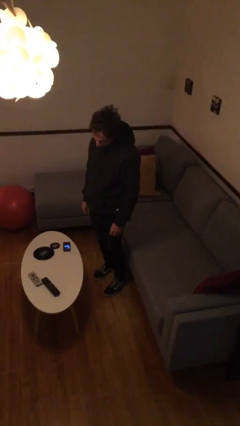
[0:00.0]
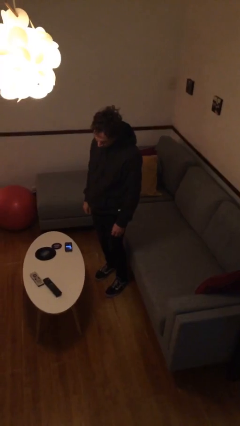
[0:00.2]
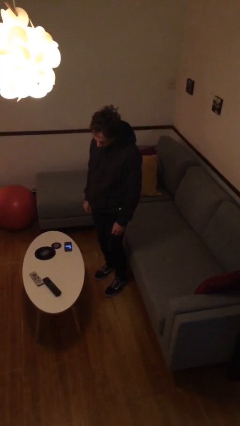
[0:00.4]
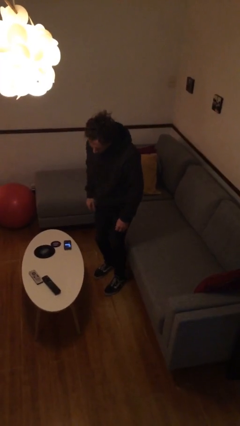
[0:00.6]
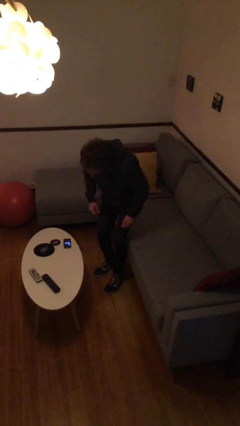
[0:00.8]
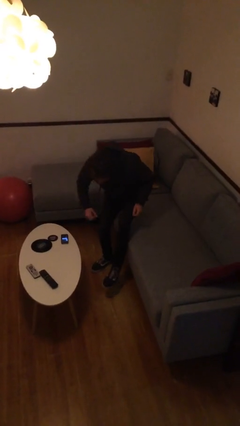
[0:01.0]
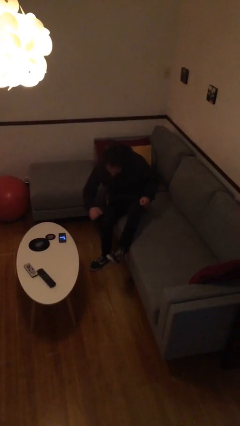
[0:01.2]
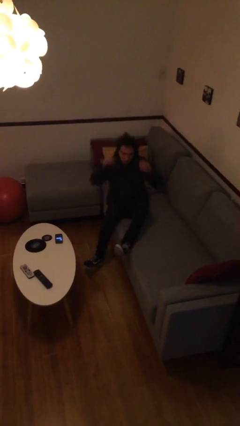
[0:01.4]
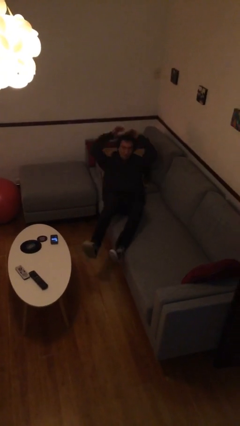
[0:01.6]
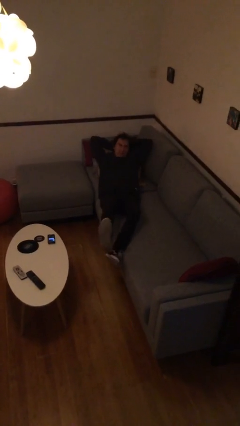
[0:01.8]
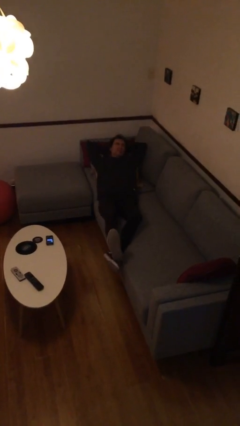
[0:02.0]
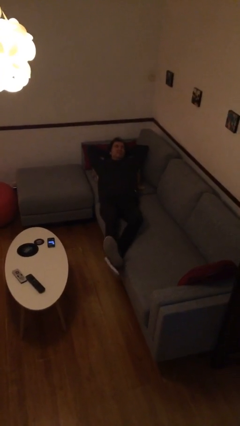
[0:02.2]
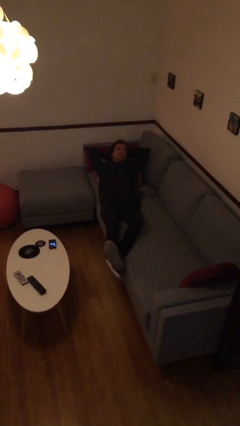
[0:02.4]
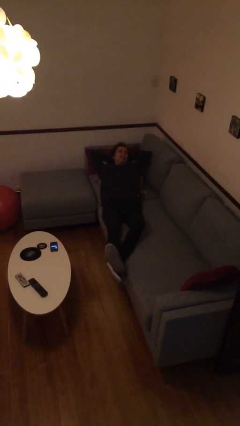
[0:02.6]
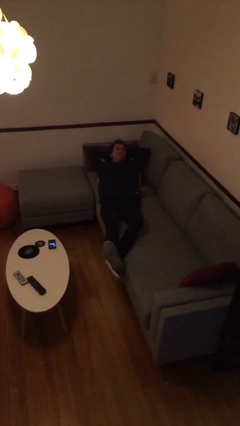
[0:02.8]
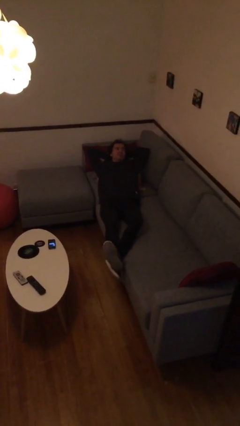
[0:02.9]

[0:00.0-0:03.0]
person lies down on couch

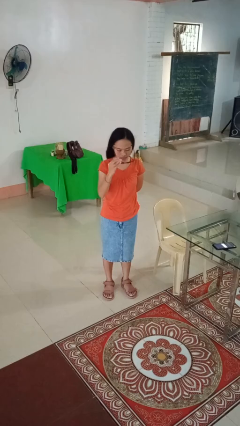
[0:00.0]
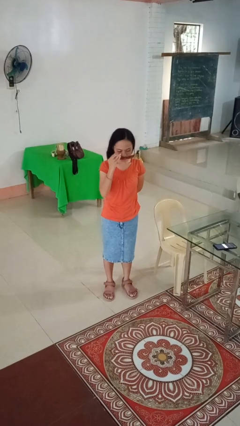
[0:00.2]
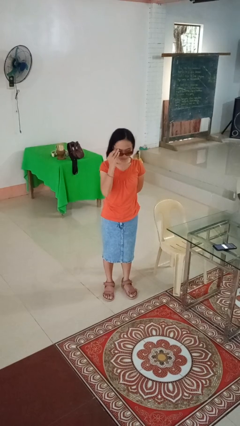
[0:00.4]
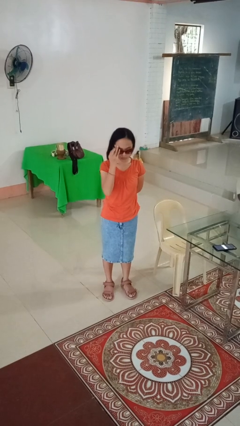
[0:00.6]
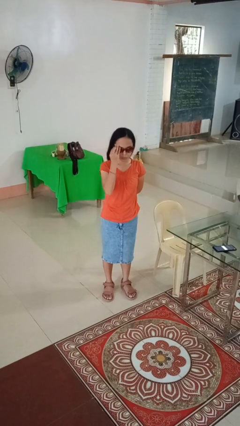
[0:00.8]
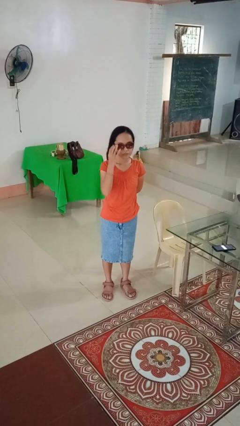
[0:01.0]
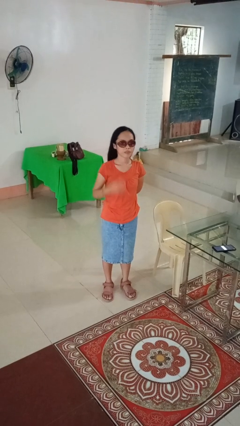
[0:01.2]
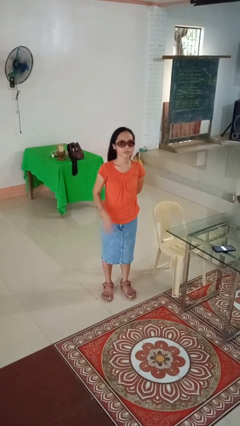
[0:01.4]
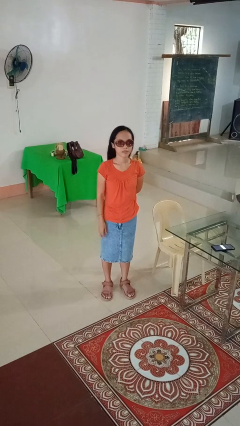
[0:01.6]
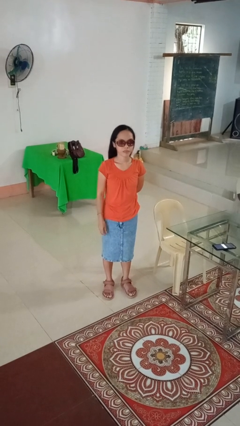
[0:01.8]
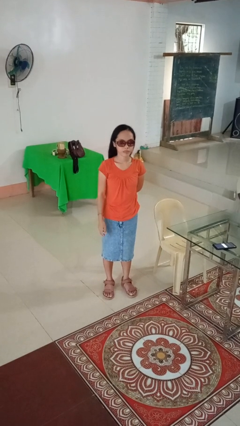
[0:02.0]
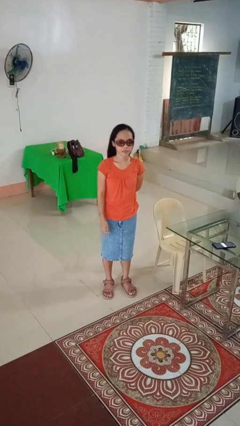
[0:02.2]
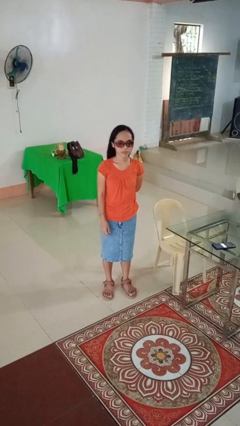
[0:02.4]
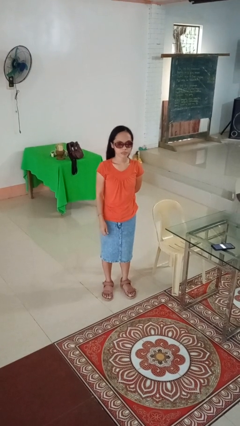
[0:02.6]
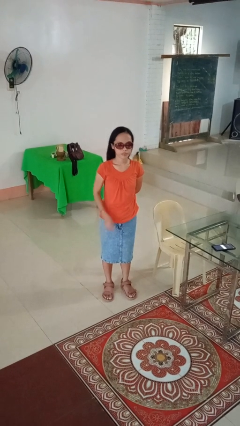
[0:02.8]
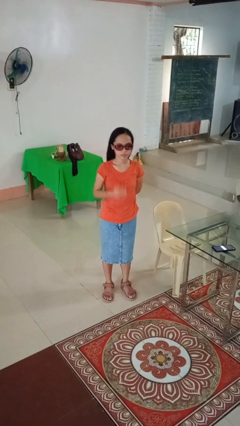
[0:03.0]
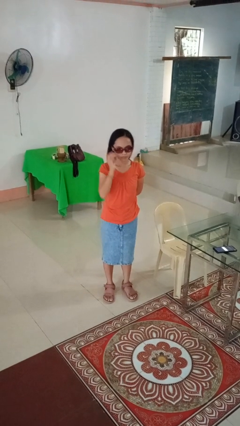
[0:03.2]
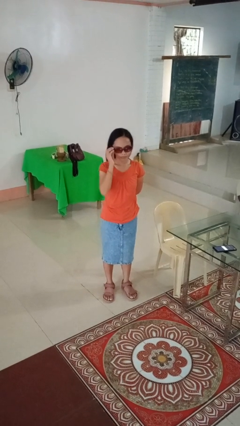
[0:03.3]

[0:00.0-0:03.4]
person puts on sunglasses

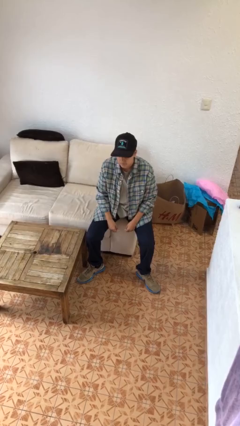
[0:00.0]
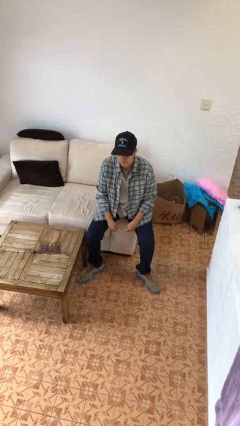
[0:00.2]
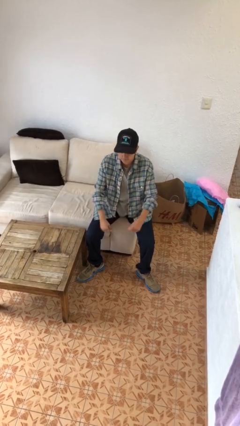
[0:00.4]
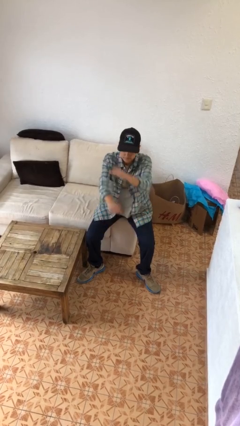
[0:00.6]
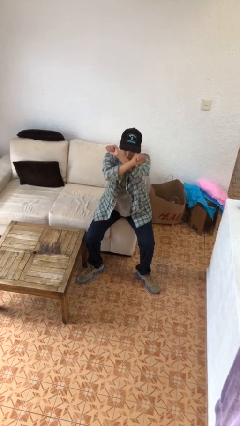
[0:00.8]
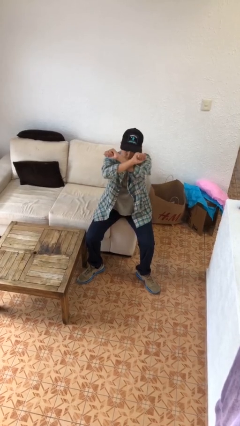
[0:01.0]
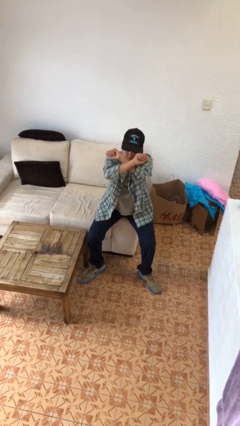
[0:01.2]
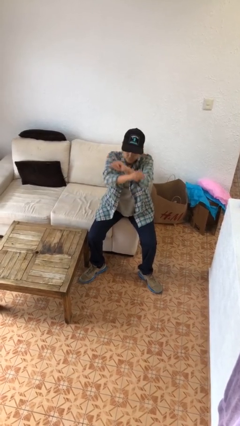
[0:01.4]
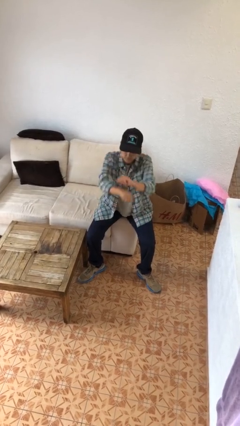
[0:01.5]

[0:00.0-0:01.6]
person gestures arms x

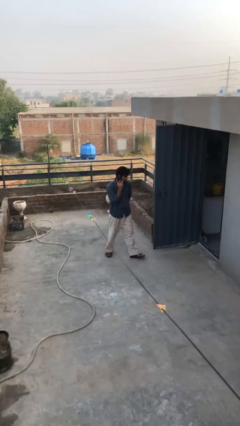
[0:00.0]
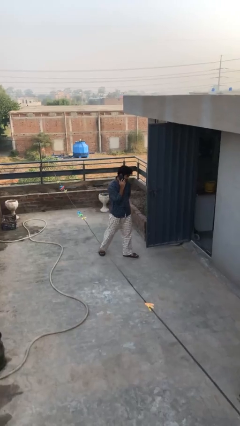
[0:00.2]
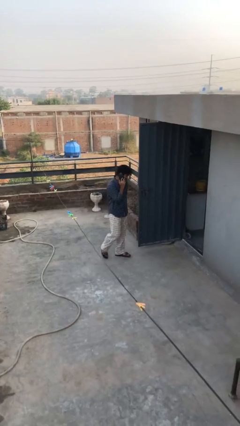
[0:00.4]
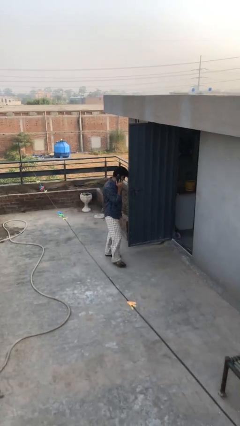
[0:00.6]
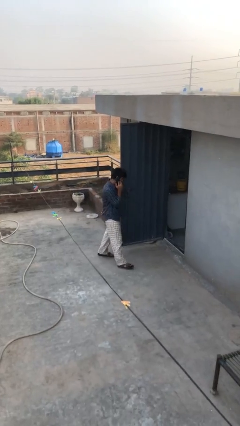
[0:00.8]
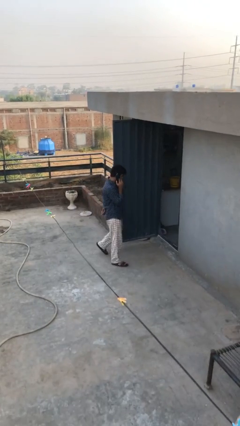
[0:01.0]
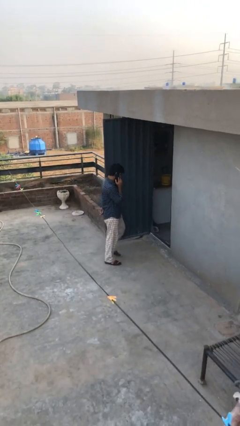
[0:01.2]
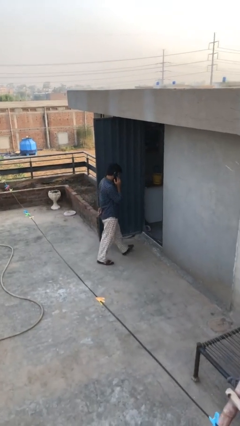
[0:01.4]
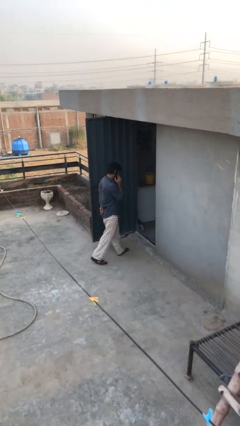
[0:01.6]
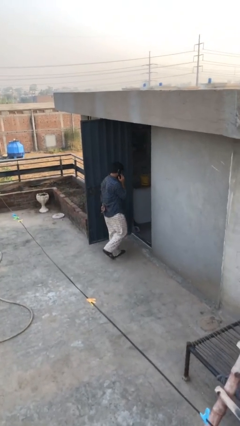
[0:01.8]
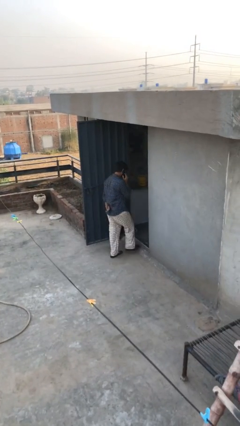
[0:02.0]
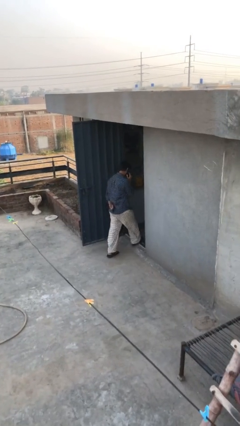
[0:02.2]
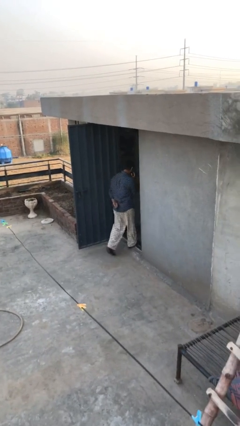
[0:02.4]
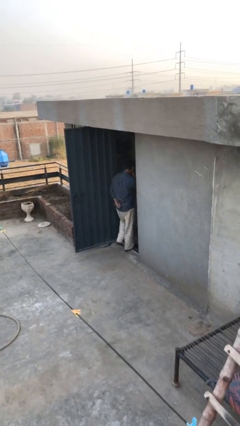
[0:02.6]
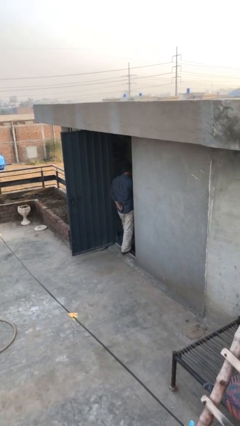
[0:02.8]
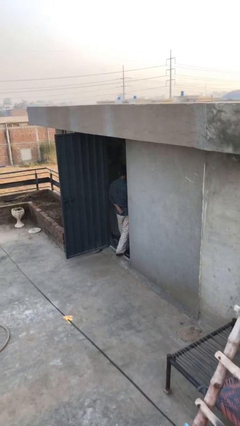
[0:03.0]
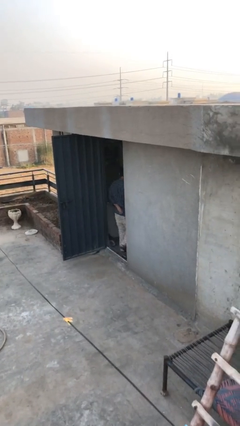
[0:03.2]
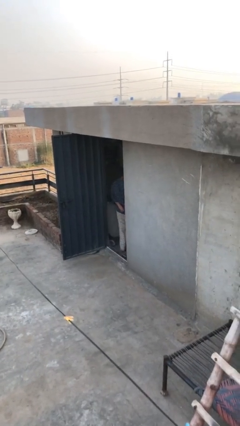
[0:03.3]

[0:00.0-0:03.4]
person exits scene through structure

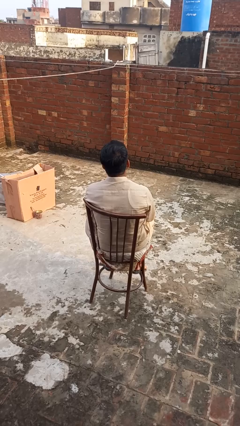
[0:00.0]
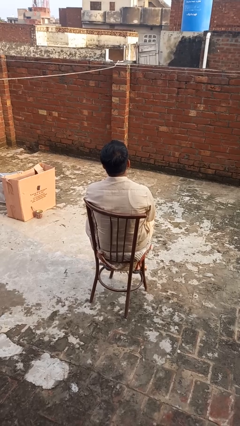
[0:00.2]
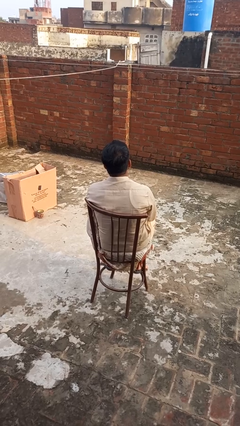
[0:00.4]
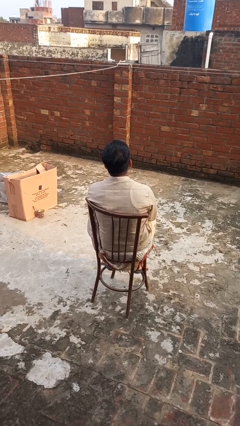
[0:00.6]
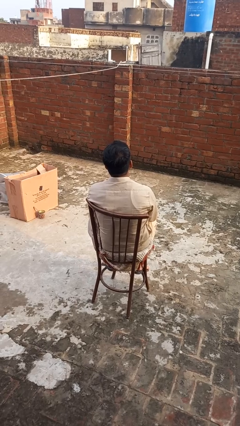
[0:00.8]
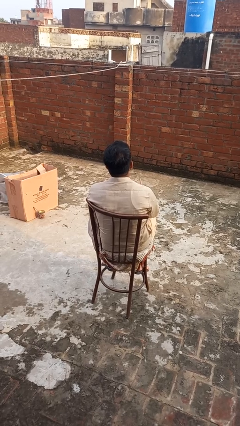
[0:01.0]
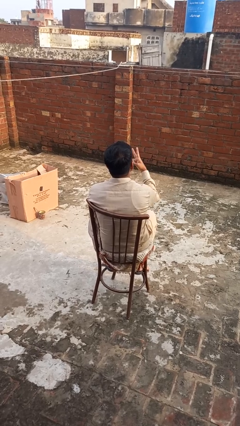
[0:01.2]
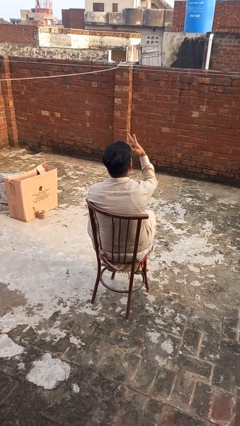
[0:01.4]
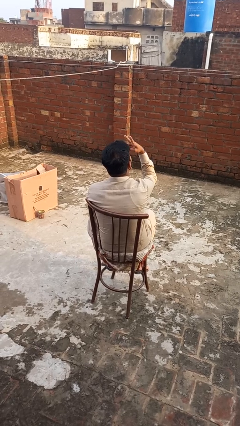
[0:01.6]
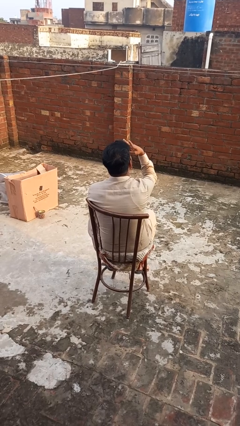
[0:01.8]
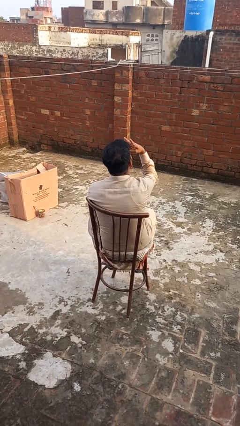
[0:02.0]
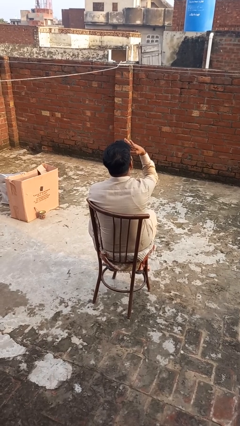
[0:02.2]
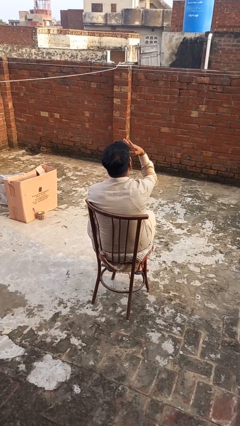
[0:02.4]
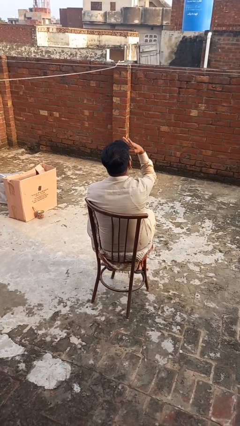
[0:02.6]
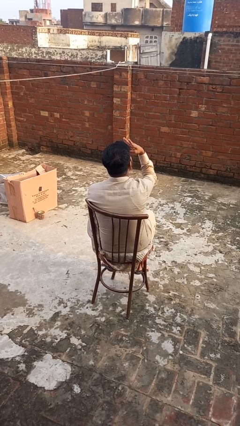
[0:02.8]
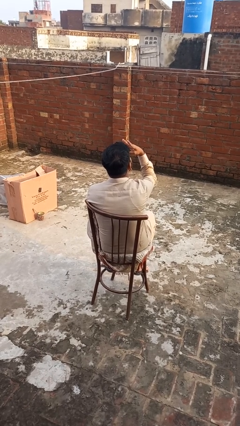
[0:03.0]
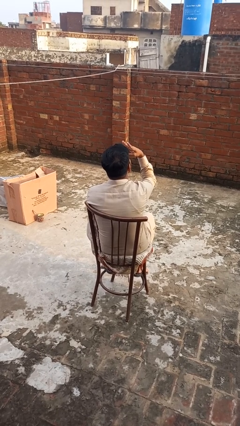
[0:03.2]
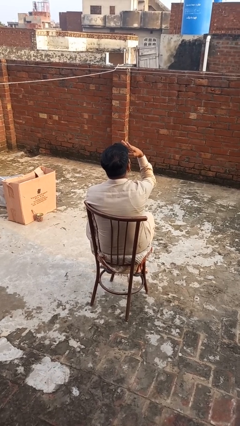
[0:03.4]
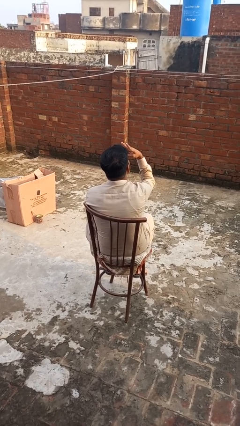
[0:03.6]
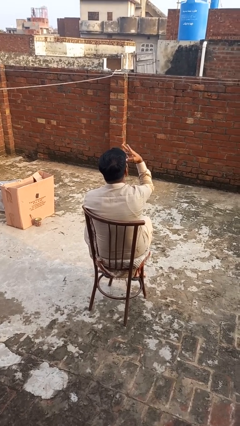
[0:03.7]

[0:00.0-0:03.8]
person gestures watch closely

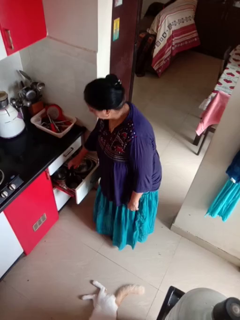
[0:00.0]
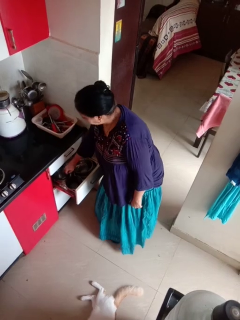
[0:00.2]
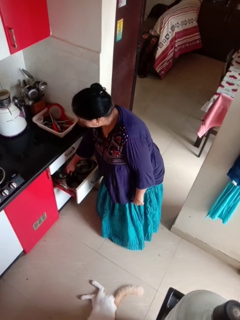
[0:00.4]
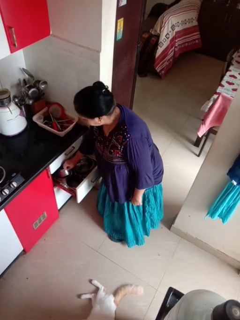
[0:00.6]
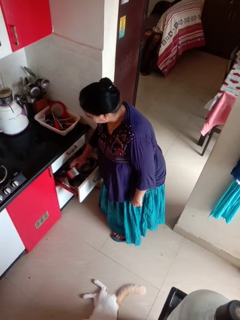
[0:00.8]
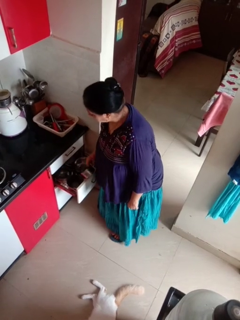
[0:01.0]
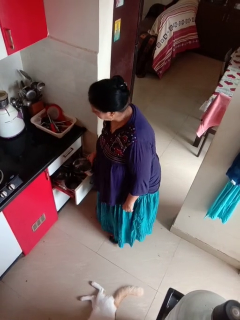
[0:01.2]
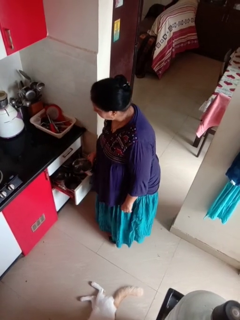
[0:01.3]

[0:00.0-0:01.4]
person takes object from kitchen drawer

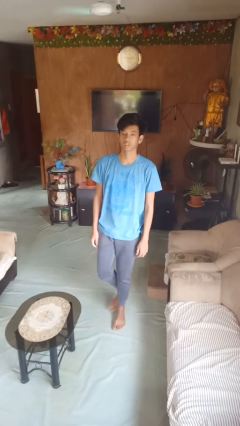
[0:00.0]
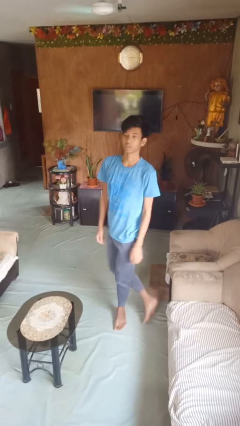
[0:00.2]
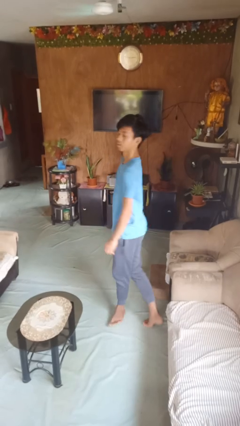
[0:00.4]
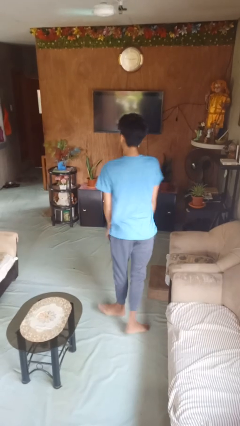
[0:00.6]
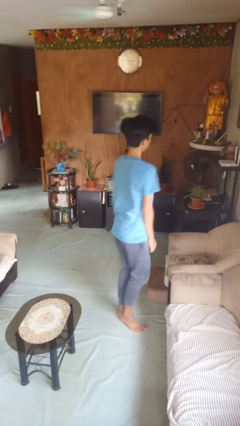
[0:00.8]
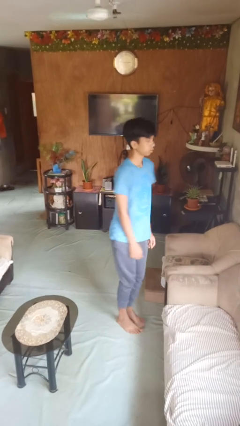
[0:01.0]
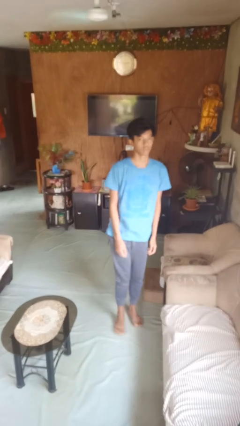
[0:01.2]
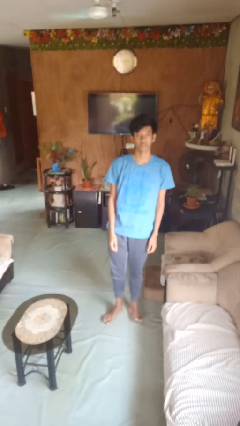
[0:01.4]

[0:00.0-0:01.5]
person twirls
